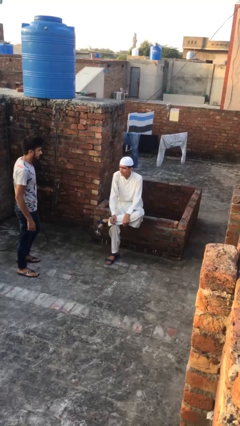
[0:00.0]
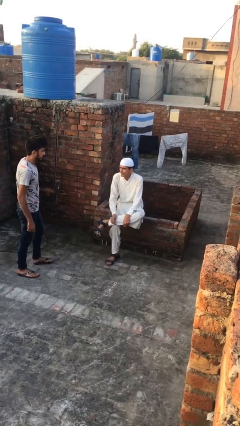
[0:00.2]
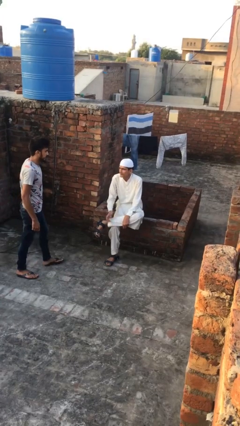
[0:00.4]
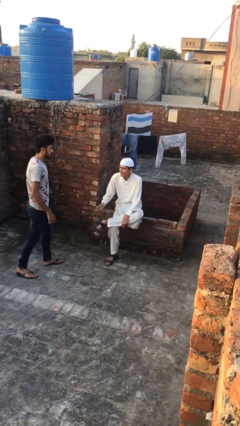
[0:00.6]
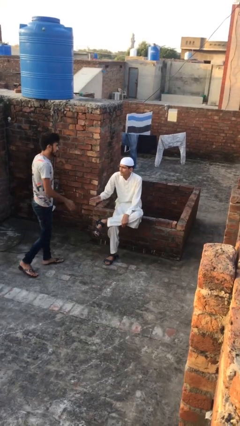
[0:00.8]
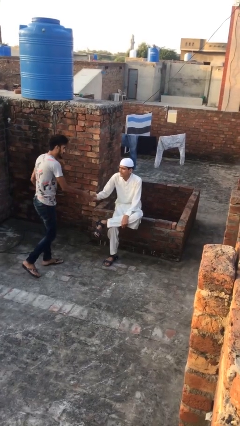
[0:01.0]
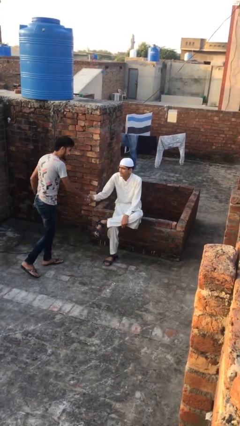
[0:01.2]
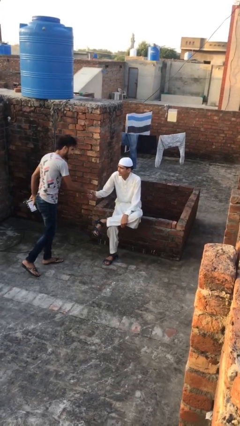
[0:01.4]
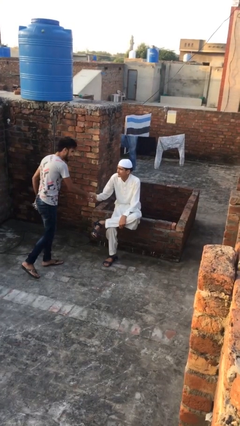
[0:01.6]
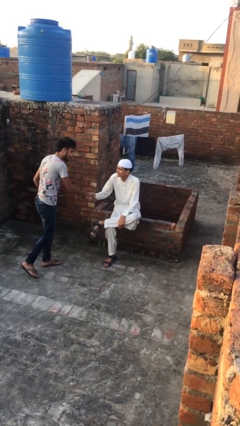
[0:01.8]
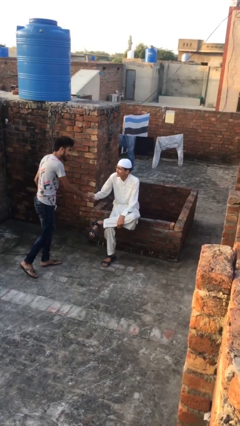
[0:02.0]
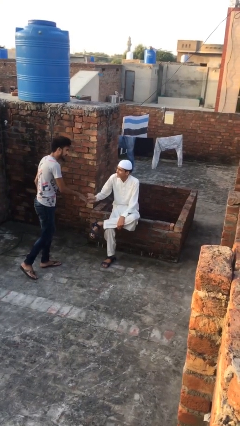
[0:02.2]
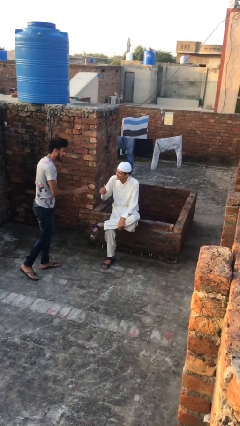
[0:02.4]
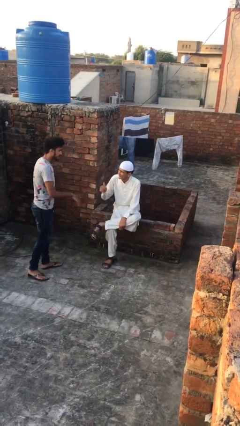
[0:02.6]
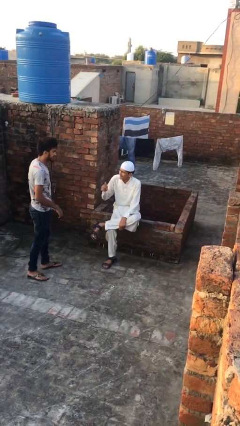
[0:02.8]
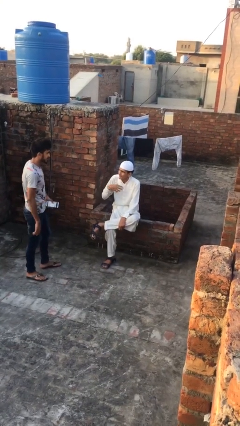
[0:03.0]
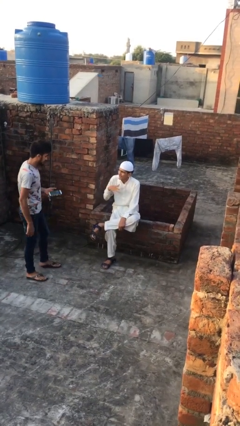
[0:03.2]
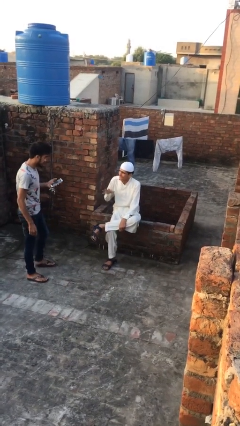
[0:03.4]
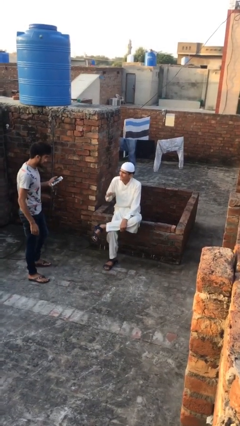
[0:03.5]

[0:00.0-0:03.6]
person shakes hand

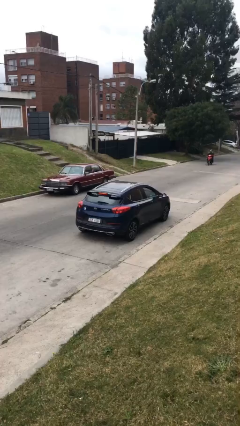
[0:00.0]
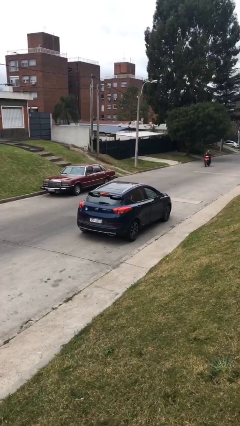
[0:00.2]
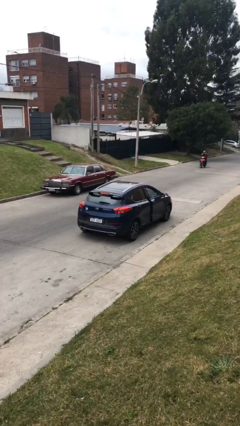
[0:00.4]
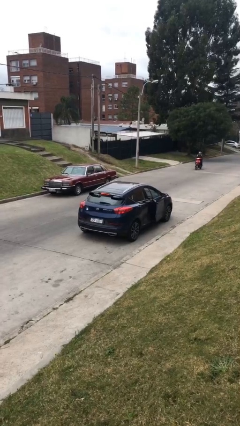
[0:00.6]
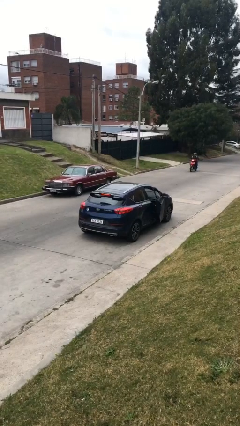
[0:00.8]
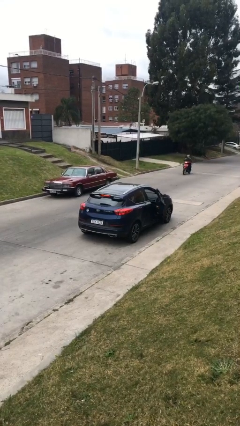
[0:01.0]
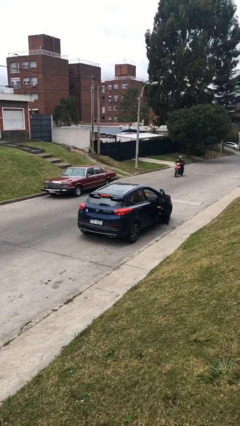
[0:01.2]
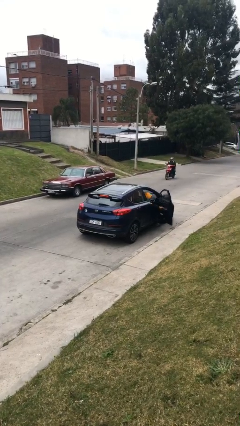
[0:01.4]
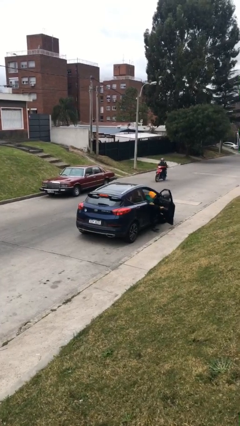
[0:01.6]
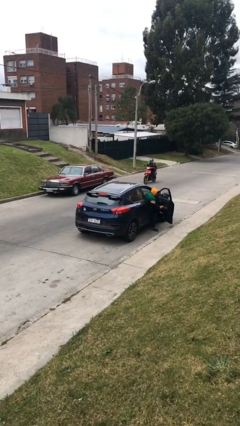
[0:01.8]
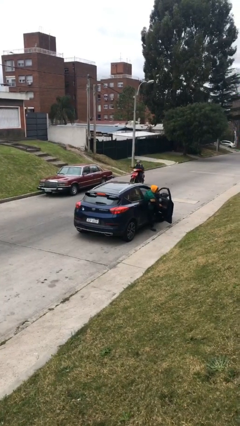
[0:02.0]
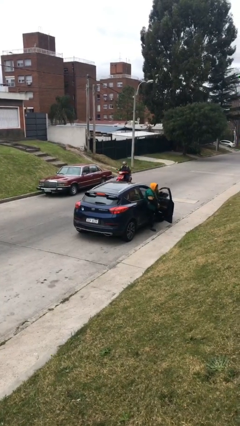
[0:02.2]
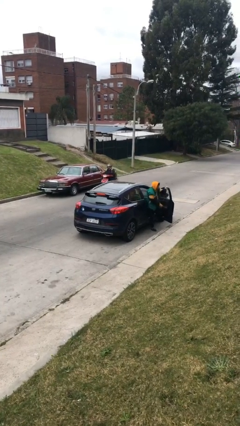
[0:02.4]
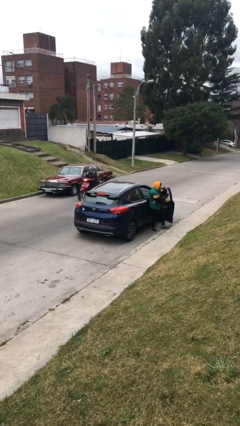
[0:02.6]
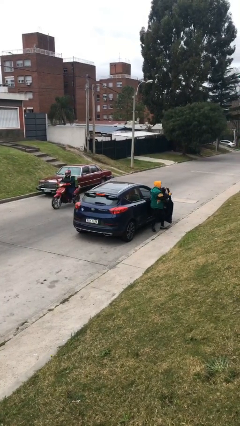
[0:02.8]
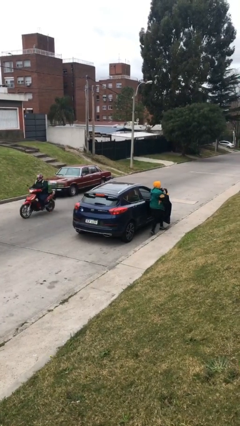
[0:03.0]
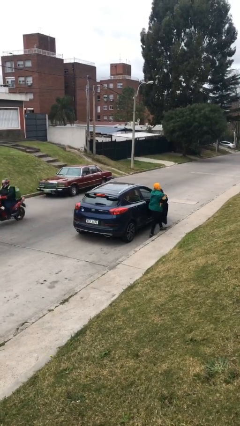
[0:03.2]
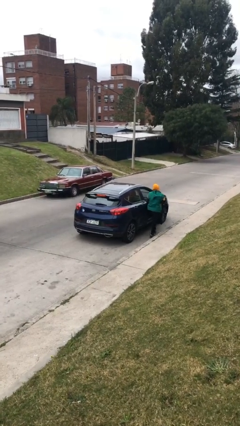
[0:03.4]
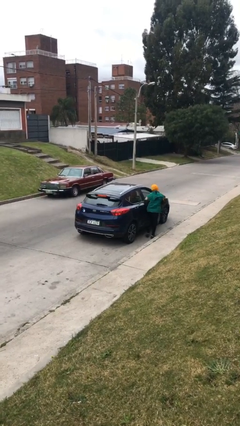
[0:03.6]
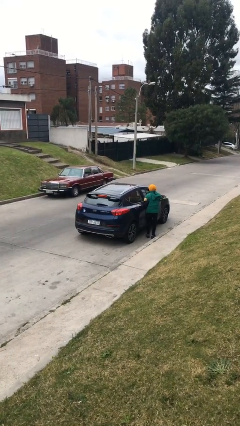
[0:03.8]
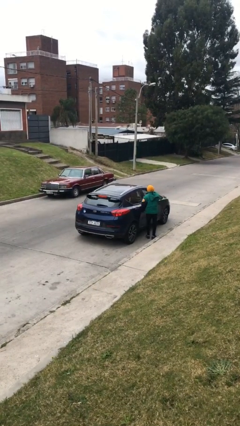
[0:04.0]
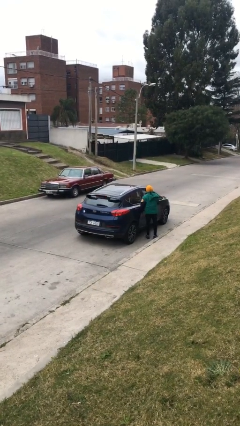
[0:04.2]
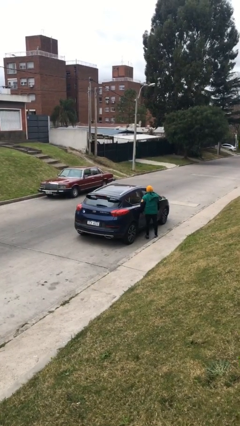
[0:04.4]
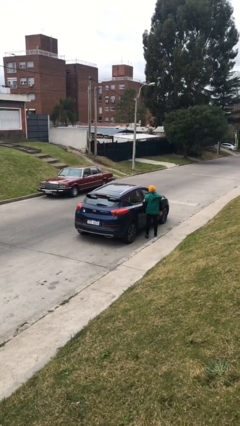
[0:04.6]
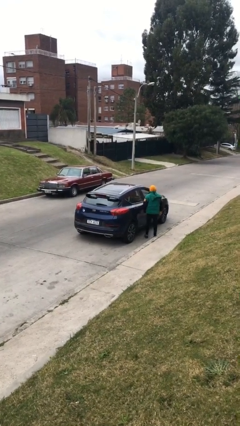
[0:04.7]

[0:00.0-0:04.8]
car drops off person

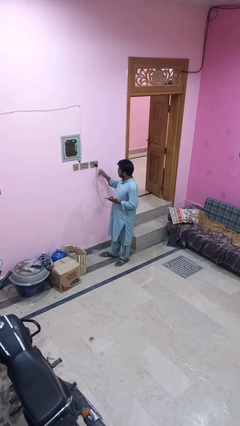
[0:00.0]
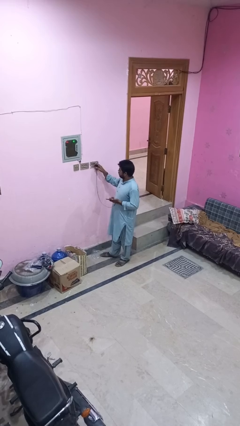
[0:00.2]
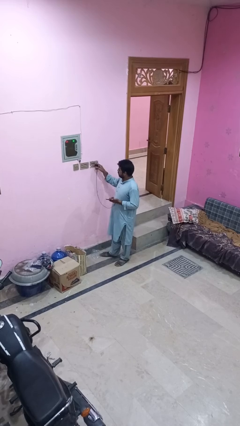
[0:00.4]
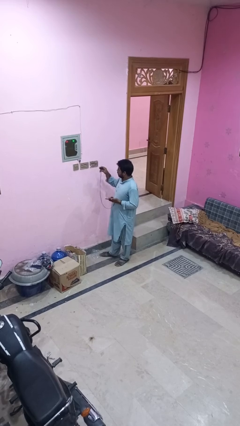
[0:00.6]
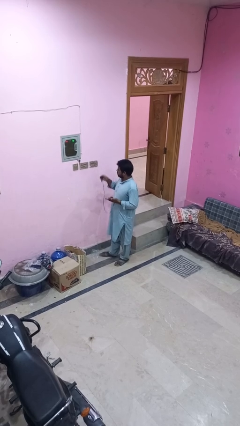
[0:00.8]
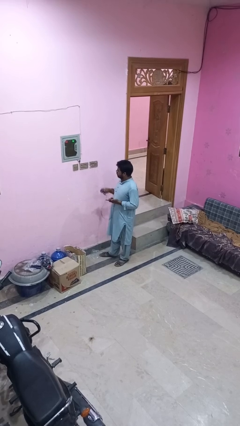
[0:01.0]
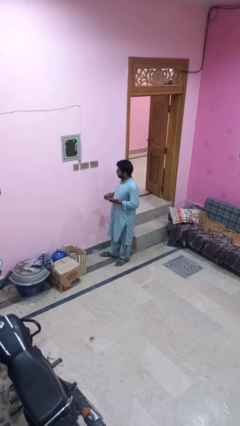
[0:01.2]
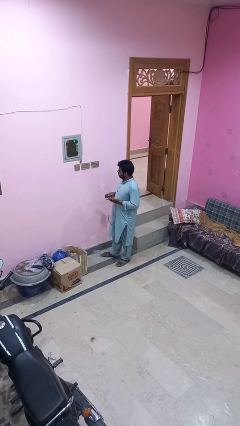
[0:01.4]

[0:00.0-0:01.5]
person unplugs from electrical socket

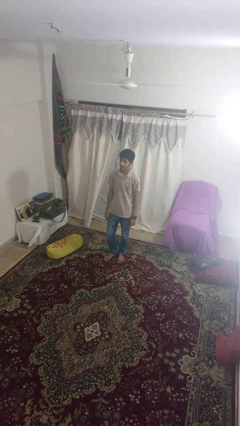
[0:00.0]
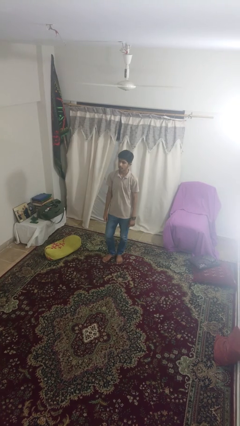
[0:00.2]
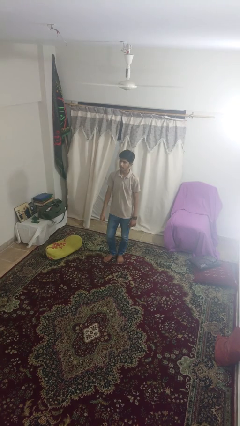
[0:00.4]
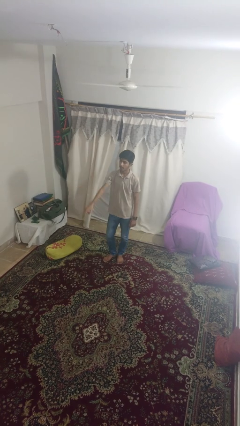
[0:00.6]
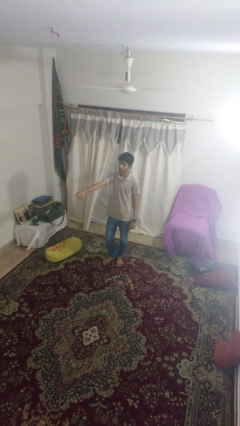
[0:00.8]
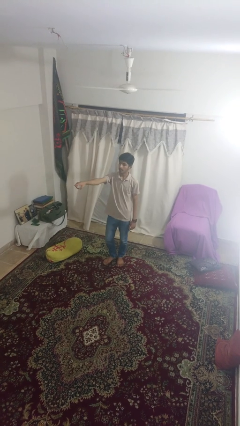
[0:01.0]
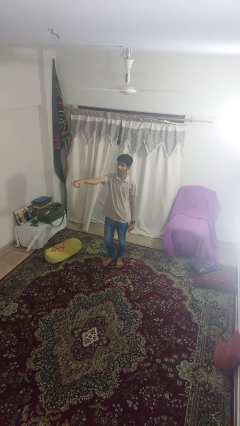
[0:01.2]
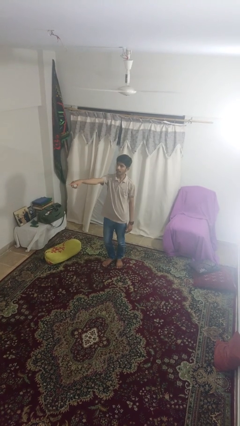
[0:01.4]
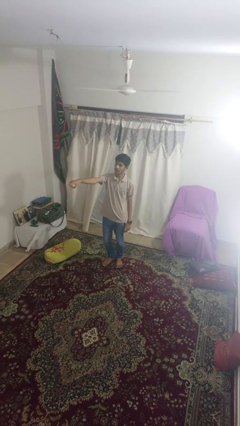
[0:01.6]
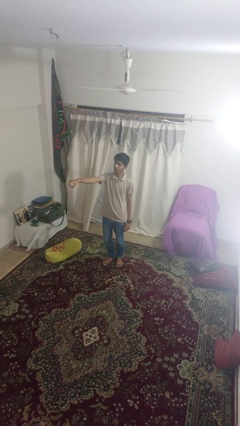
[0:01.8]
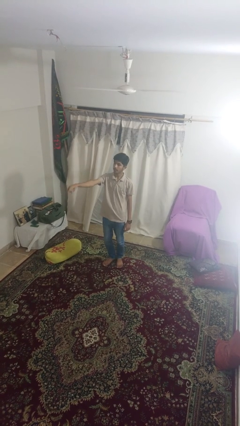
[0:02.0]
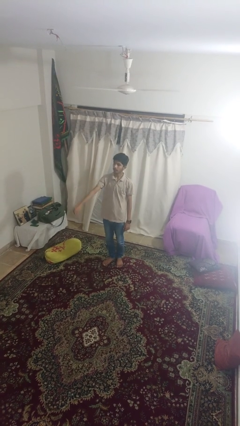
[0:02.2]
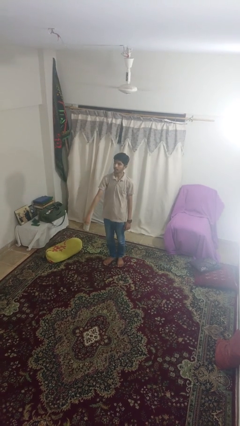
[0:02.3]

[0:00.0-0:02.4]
person points at person

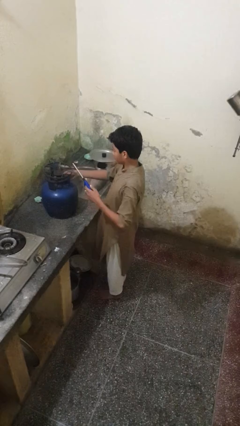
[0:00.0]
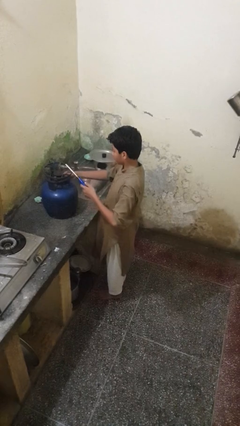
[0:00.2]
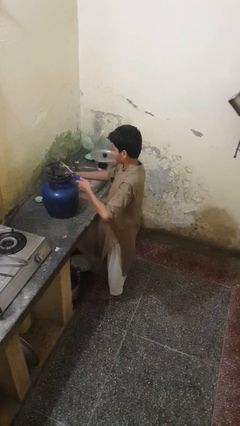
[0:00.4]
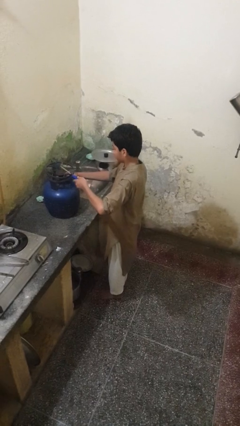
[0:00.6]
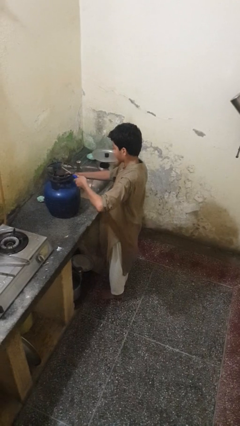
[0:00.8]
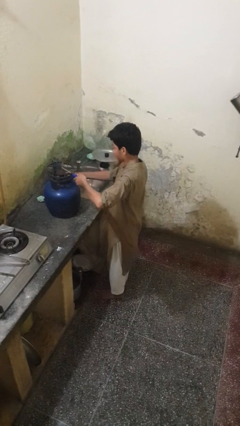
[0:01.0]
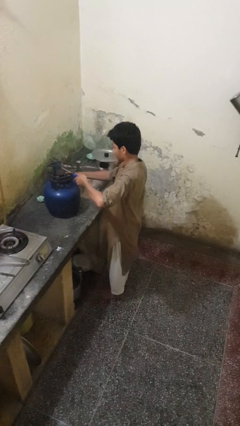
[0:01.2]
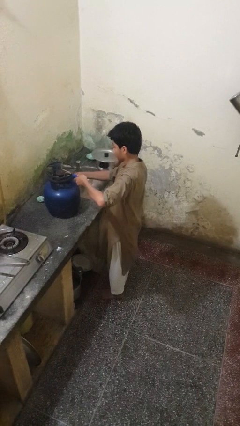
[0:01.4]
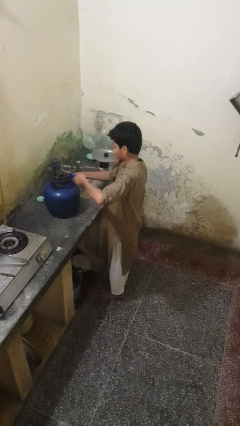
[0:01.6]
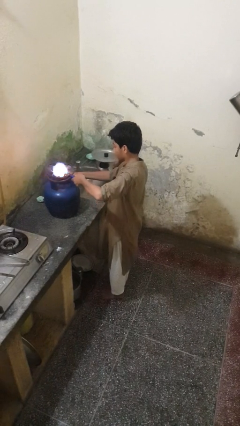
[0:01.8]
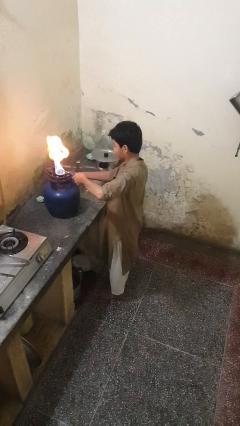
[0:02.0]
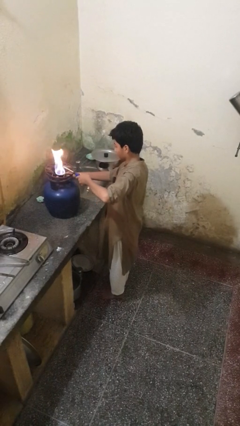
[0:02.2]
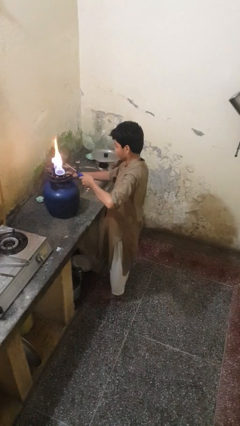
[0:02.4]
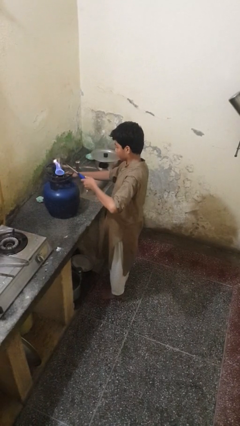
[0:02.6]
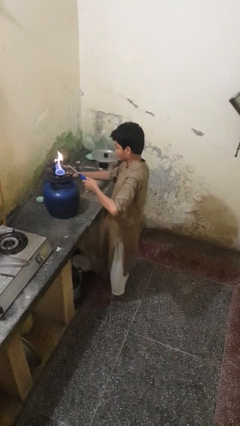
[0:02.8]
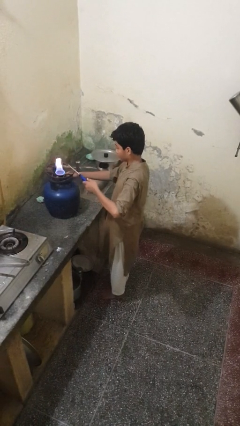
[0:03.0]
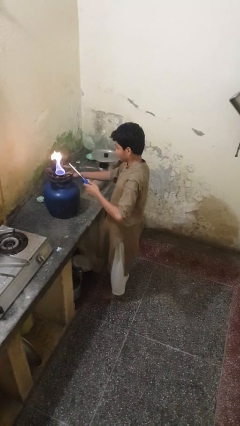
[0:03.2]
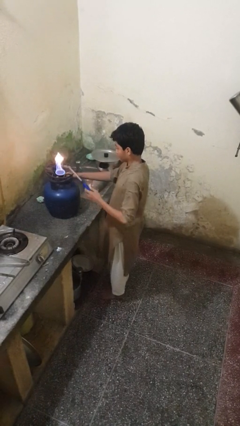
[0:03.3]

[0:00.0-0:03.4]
person turns on stovetop

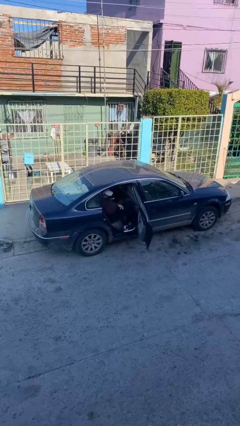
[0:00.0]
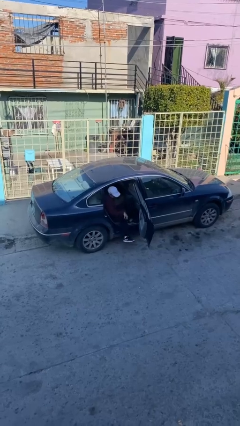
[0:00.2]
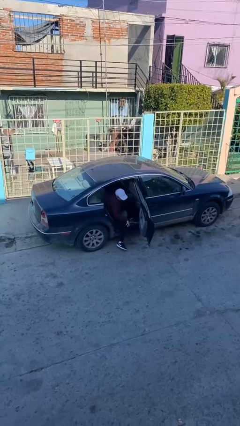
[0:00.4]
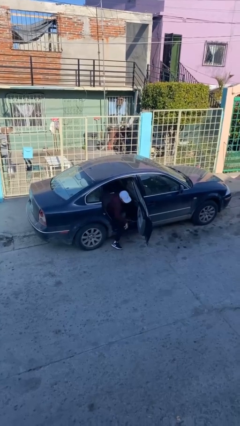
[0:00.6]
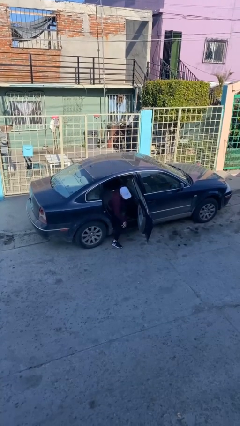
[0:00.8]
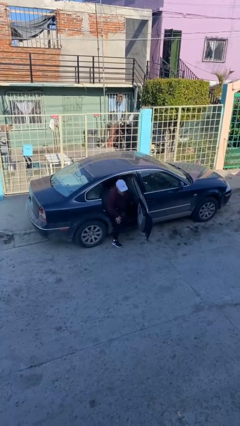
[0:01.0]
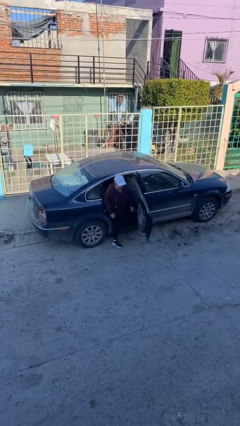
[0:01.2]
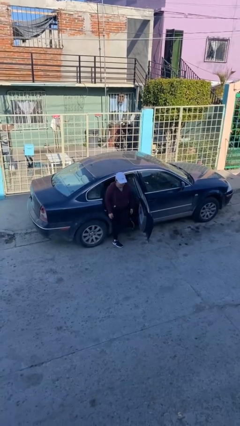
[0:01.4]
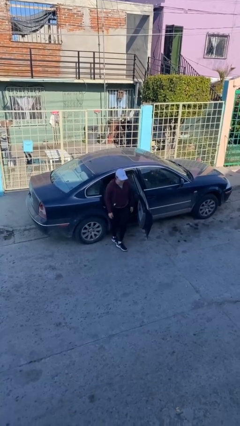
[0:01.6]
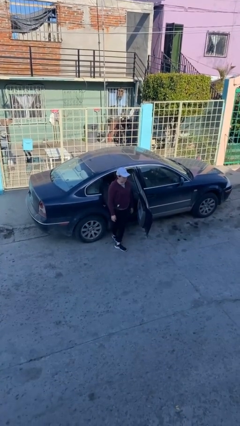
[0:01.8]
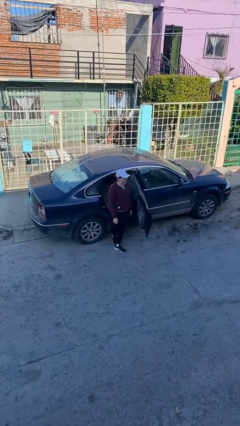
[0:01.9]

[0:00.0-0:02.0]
person exits car
